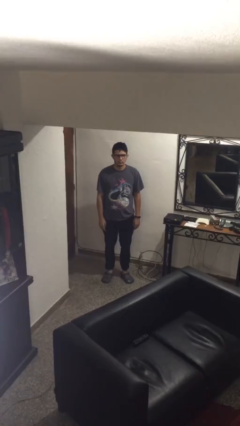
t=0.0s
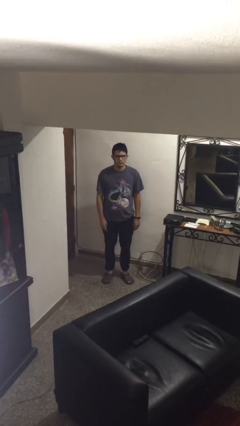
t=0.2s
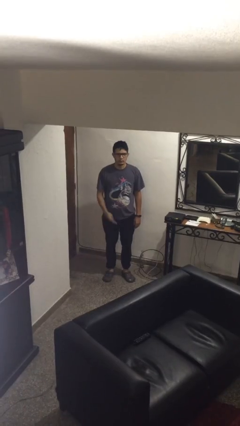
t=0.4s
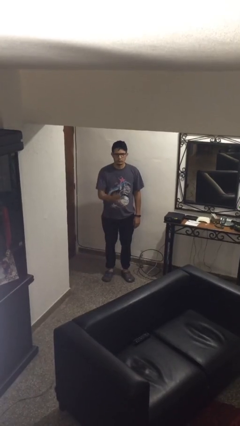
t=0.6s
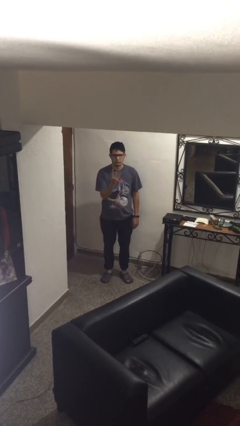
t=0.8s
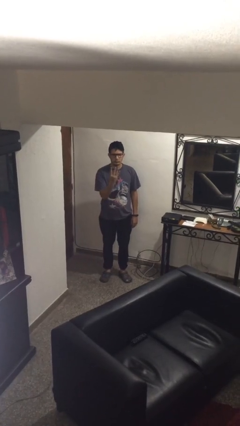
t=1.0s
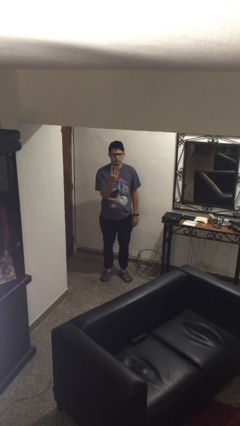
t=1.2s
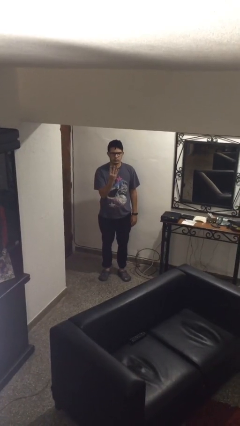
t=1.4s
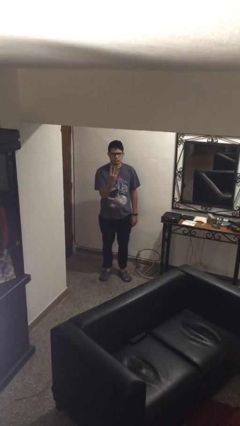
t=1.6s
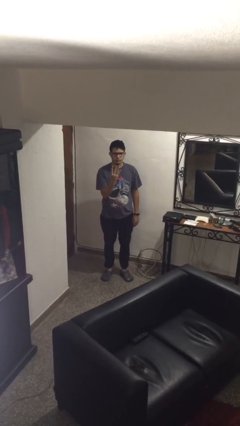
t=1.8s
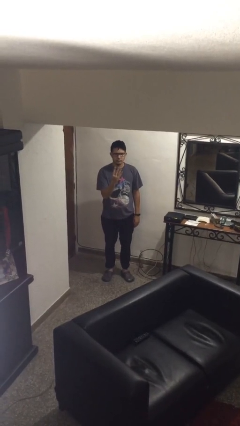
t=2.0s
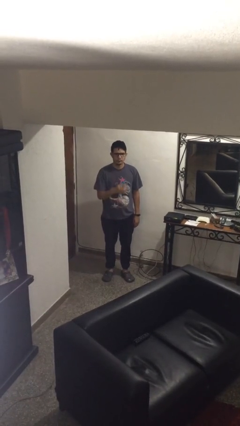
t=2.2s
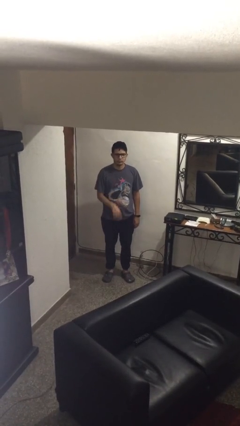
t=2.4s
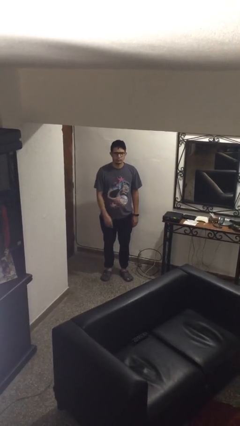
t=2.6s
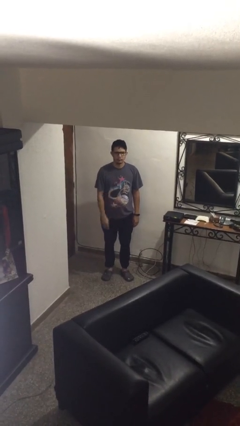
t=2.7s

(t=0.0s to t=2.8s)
person gestures number four

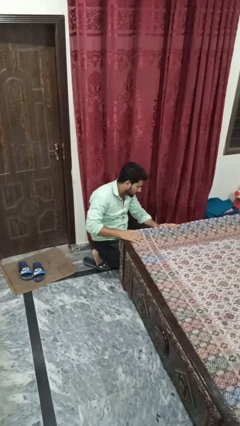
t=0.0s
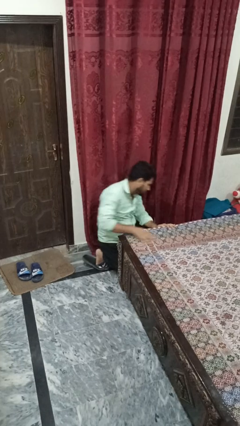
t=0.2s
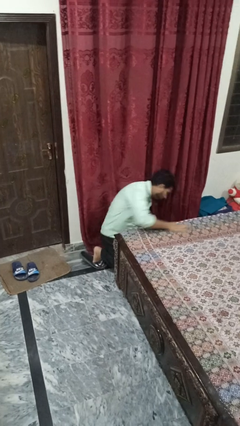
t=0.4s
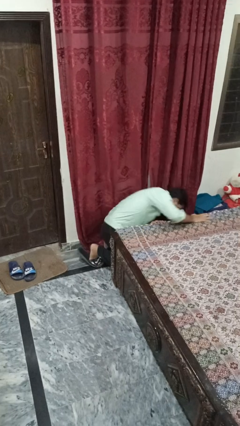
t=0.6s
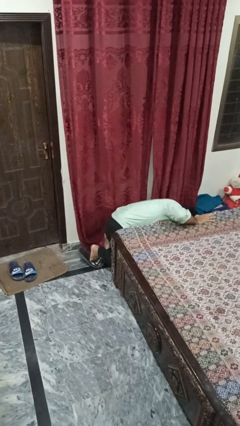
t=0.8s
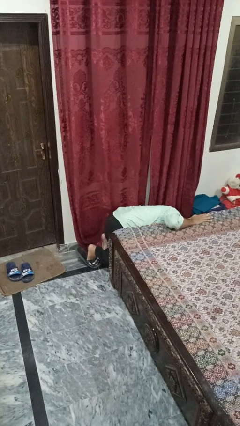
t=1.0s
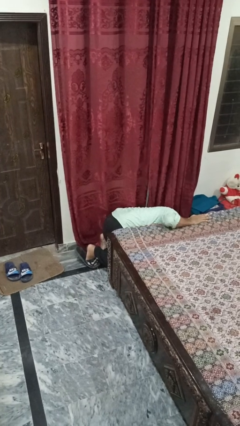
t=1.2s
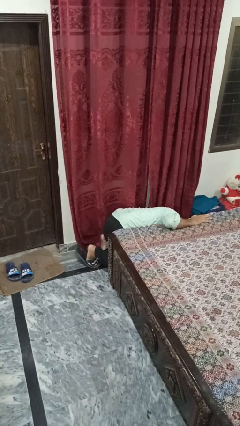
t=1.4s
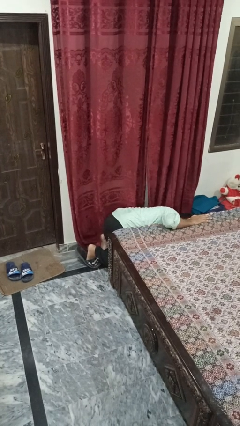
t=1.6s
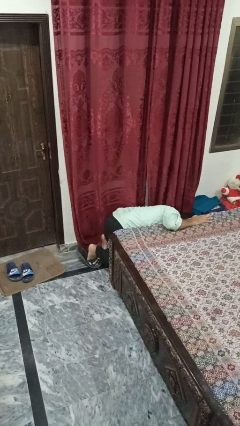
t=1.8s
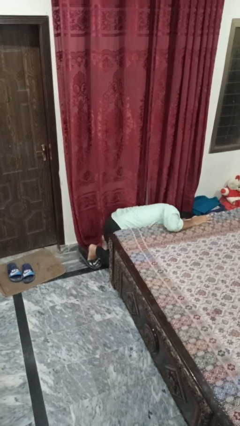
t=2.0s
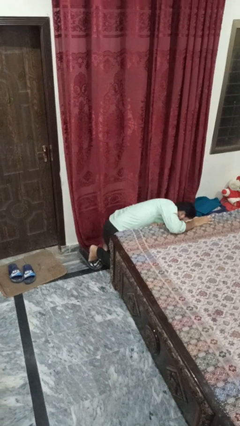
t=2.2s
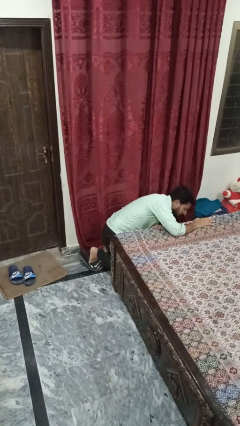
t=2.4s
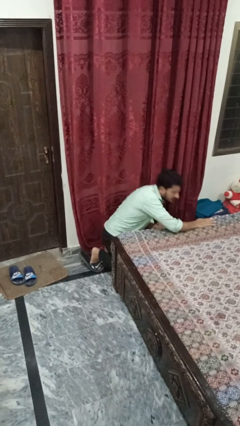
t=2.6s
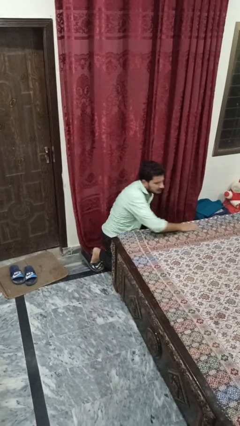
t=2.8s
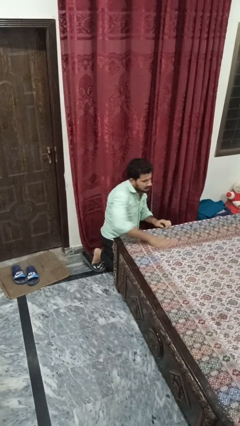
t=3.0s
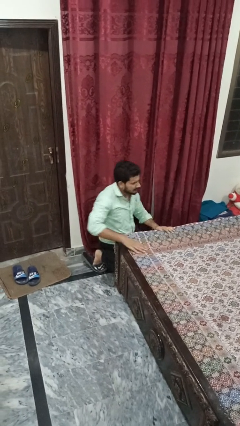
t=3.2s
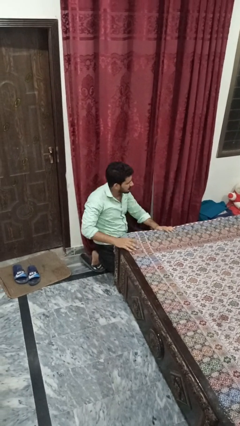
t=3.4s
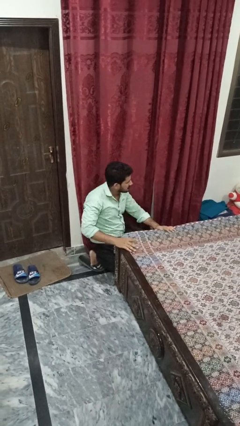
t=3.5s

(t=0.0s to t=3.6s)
person searches under bed

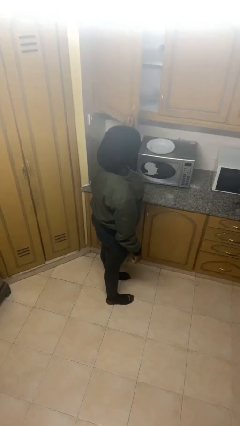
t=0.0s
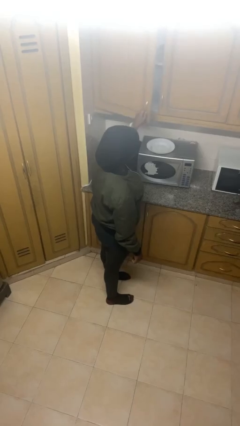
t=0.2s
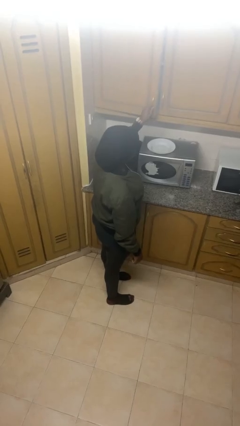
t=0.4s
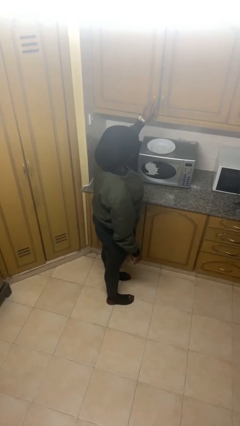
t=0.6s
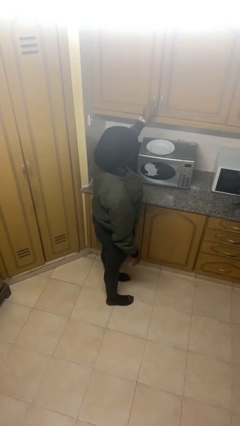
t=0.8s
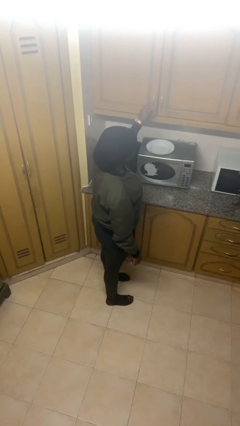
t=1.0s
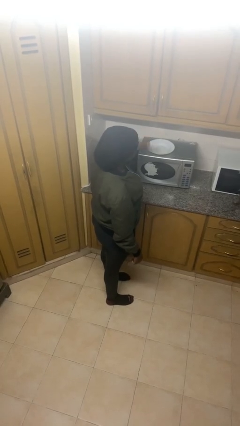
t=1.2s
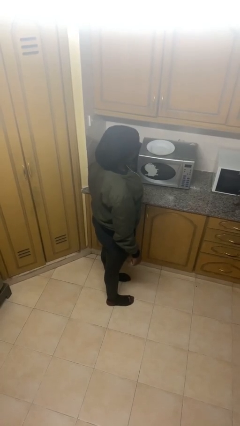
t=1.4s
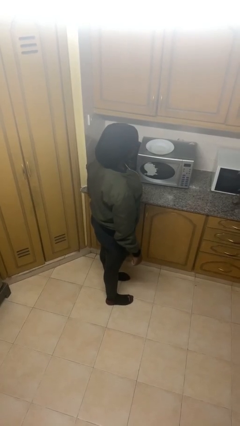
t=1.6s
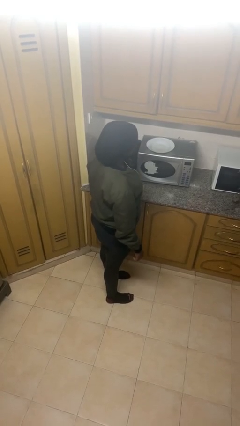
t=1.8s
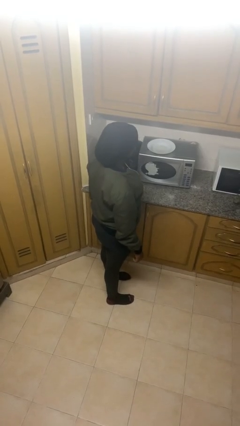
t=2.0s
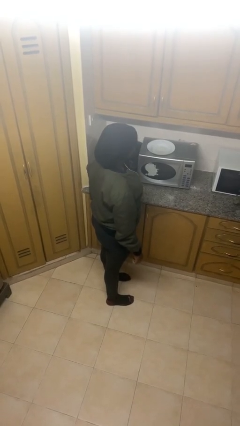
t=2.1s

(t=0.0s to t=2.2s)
person closes cabinet

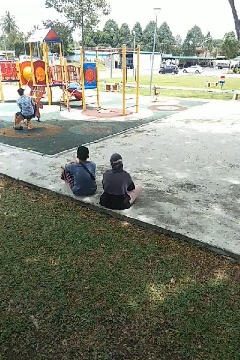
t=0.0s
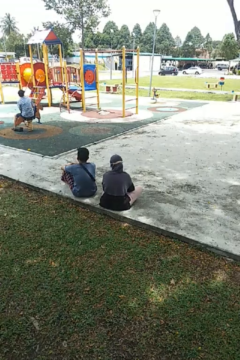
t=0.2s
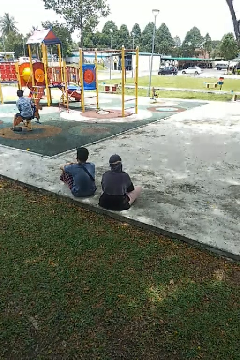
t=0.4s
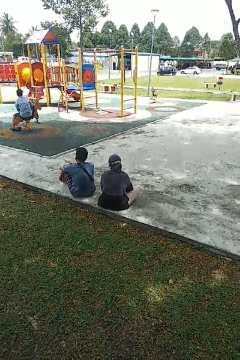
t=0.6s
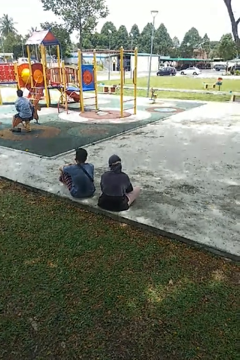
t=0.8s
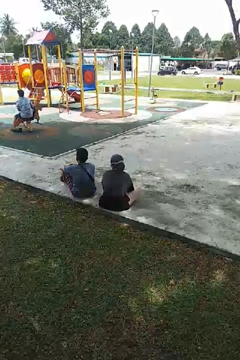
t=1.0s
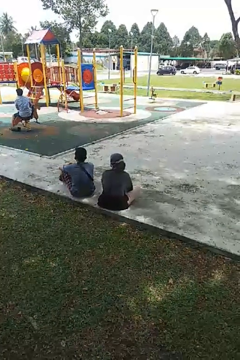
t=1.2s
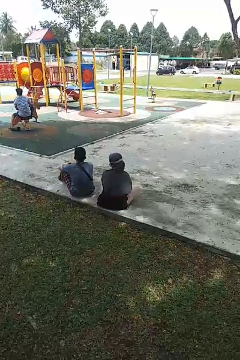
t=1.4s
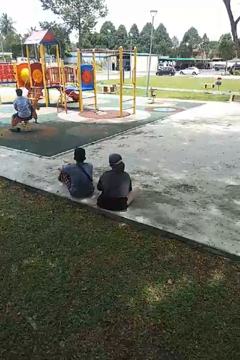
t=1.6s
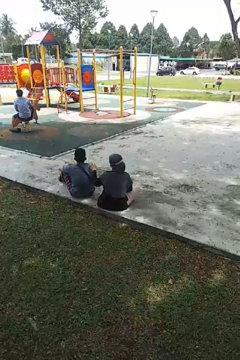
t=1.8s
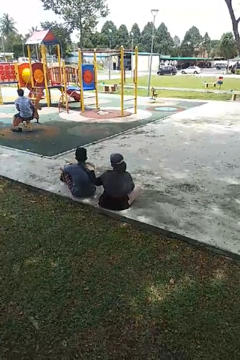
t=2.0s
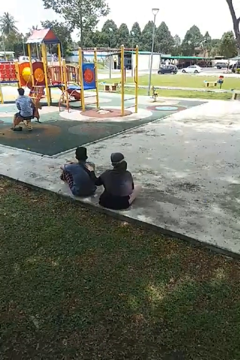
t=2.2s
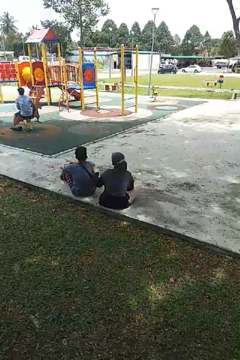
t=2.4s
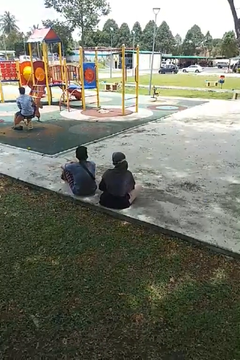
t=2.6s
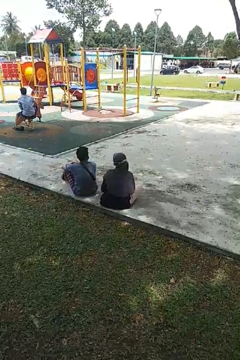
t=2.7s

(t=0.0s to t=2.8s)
person touches back of person

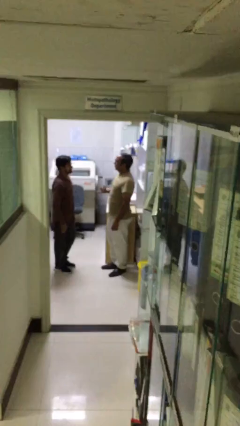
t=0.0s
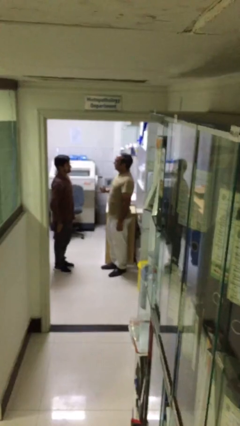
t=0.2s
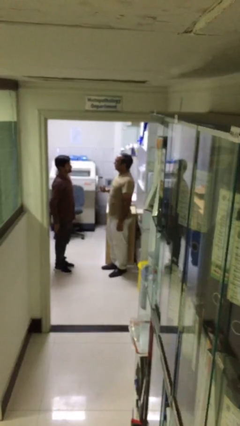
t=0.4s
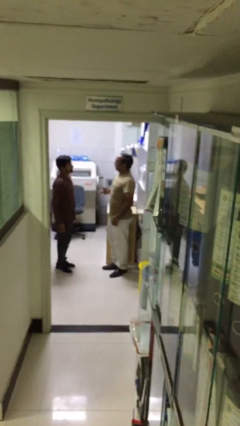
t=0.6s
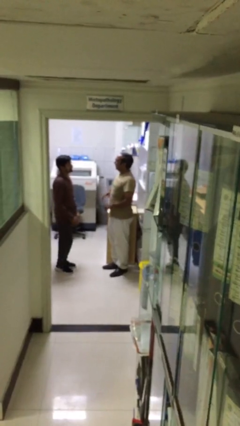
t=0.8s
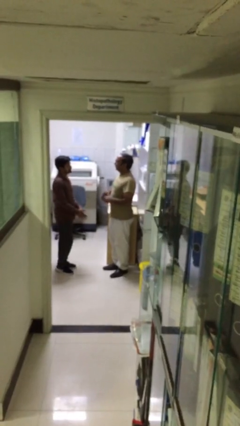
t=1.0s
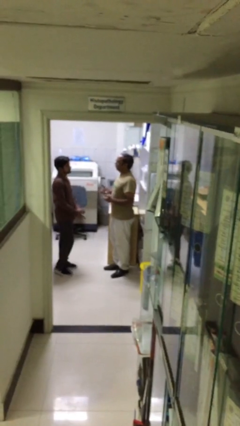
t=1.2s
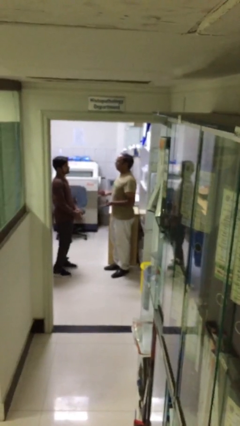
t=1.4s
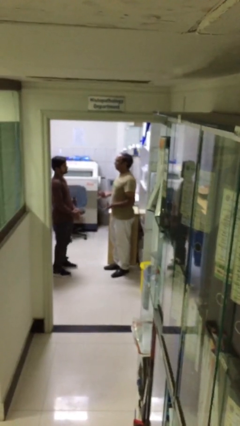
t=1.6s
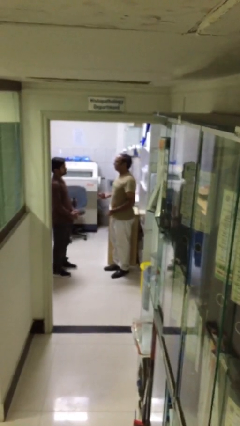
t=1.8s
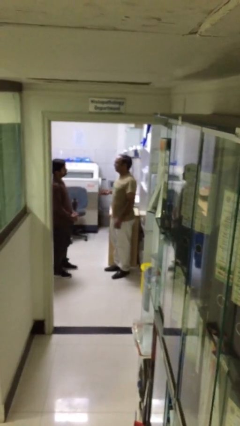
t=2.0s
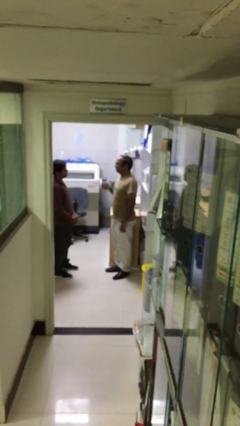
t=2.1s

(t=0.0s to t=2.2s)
person talks to person

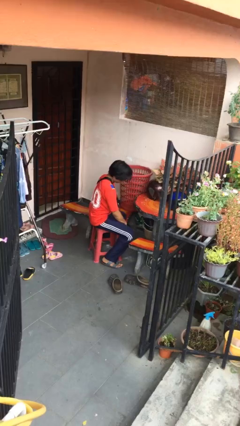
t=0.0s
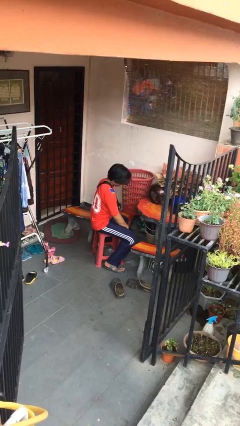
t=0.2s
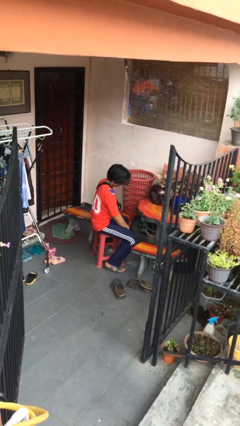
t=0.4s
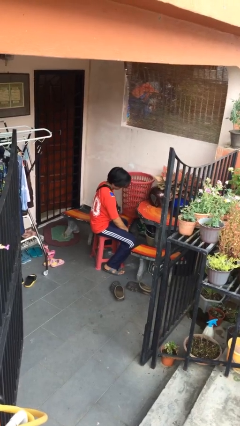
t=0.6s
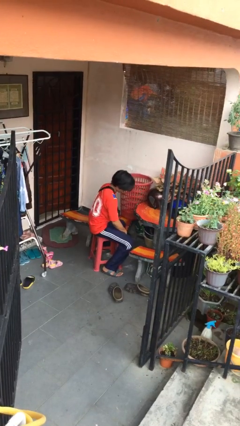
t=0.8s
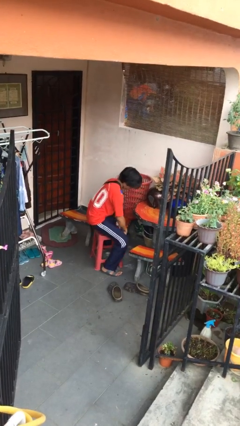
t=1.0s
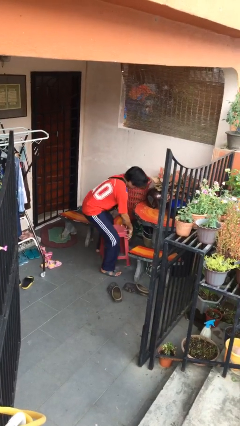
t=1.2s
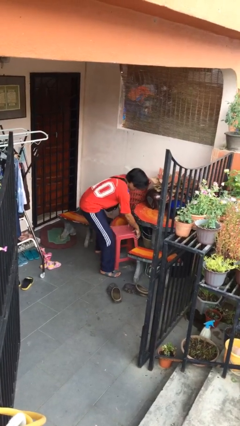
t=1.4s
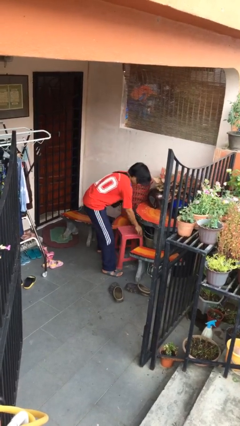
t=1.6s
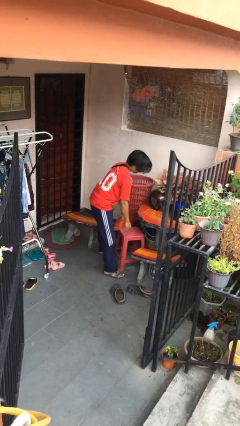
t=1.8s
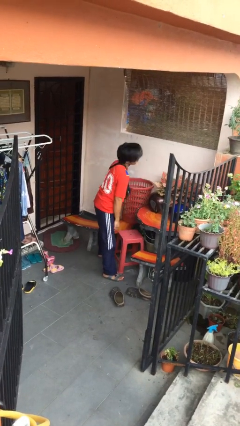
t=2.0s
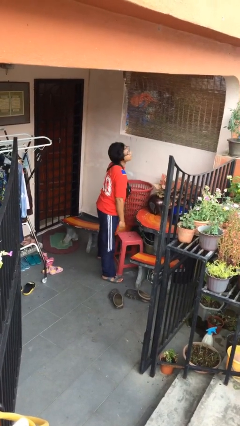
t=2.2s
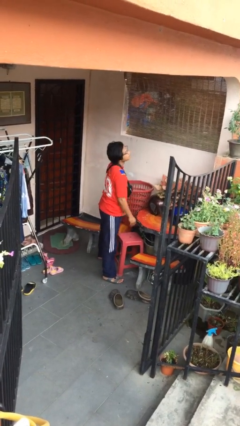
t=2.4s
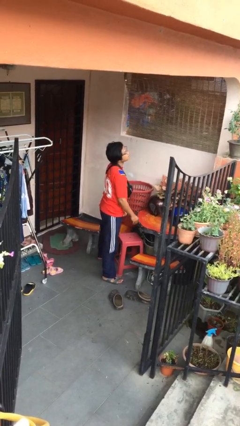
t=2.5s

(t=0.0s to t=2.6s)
person stands up

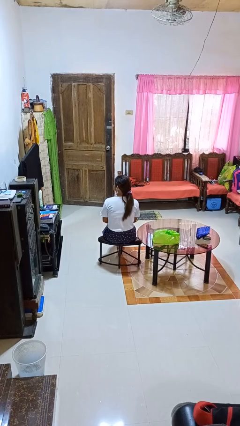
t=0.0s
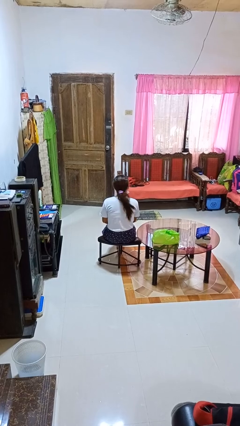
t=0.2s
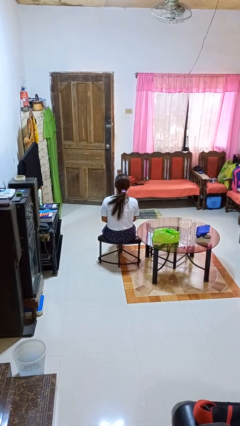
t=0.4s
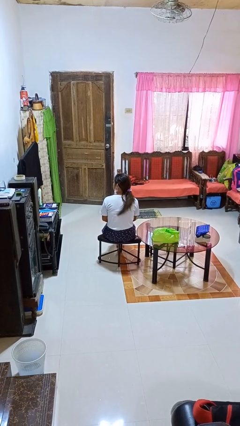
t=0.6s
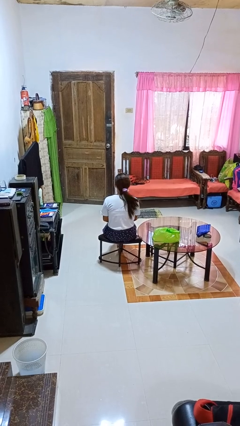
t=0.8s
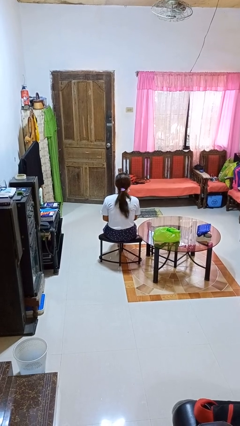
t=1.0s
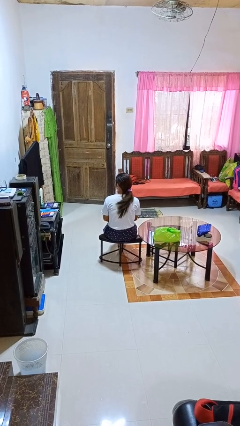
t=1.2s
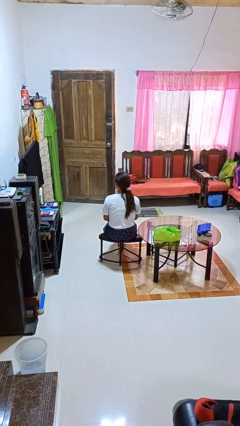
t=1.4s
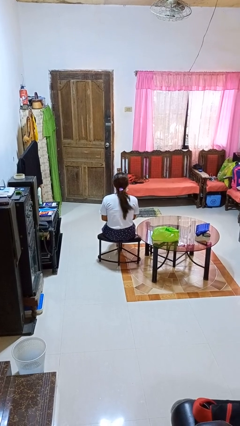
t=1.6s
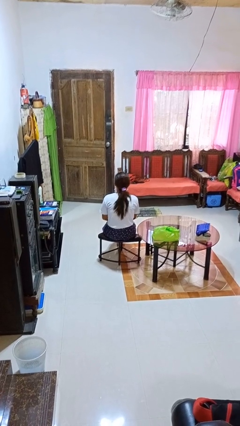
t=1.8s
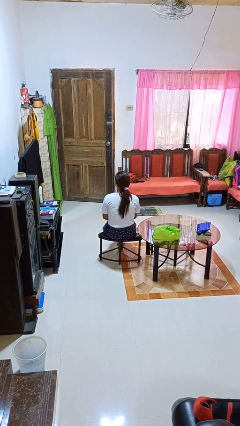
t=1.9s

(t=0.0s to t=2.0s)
person shakes head
